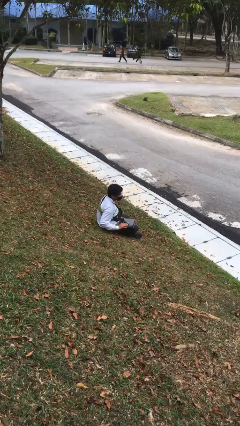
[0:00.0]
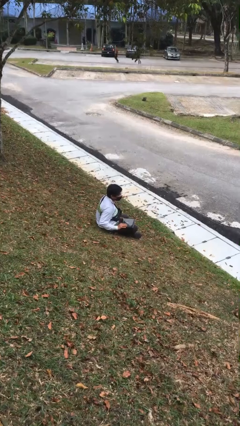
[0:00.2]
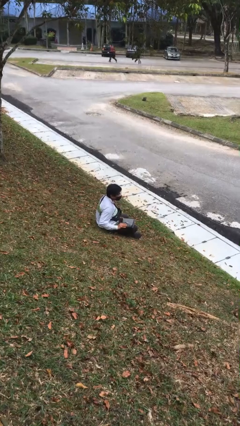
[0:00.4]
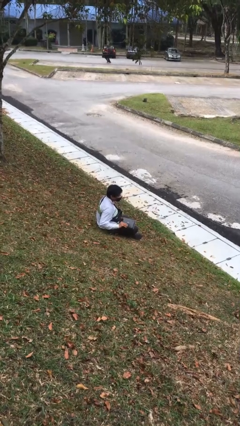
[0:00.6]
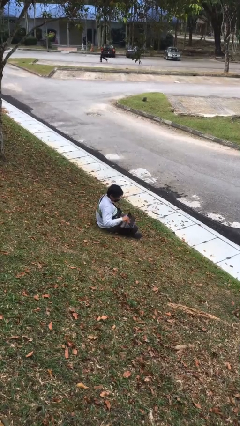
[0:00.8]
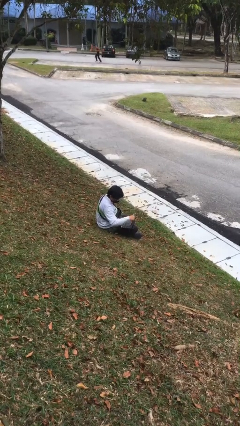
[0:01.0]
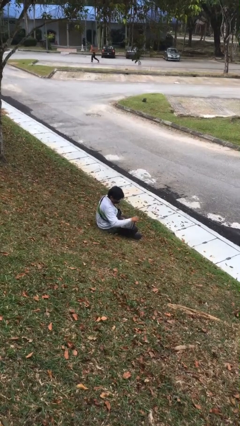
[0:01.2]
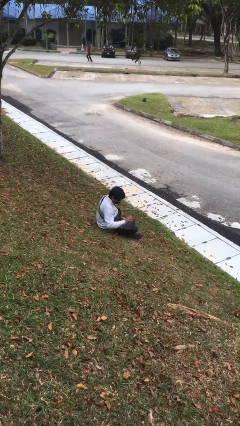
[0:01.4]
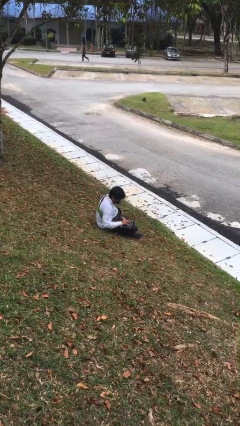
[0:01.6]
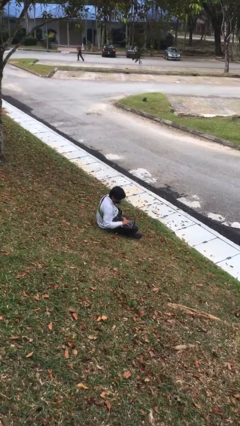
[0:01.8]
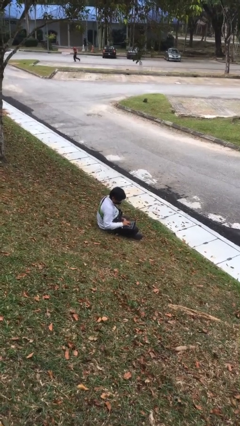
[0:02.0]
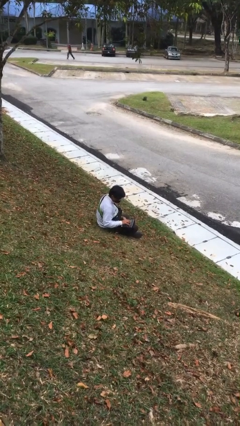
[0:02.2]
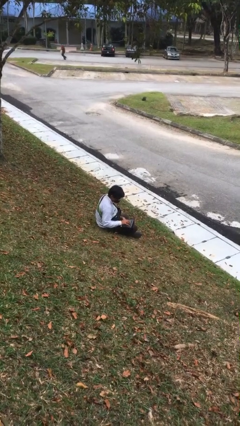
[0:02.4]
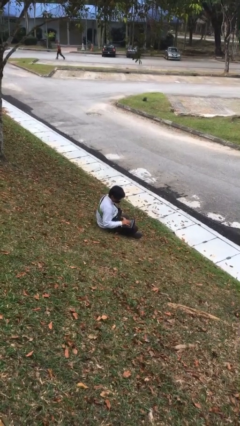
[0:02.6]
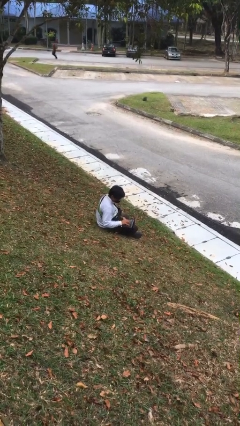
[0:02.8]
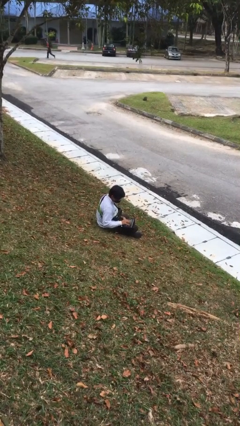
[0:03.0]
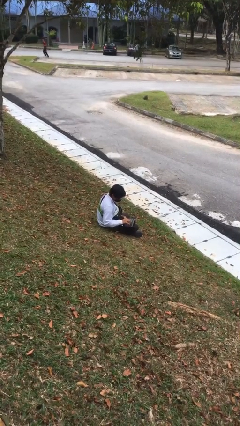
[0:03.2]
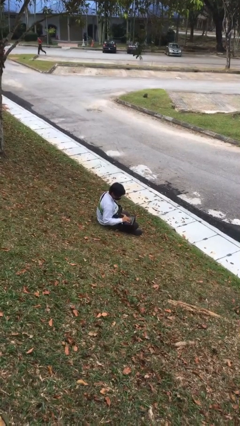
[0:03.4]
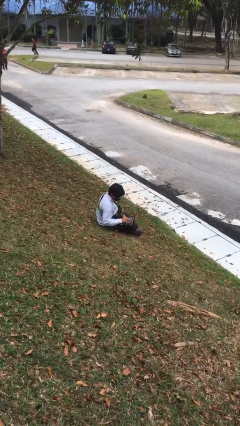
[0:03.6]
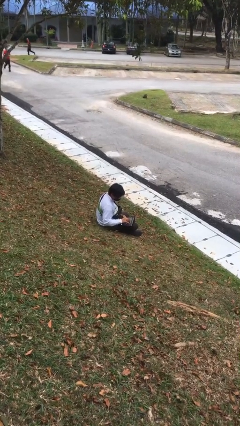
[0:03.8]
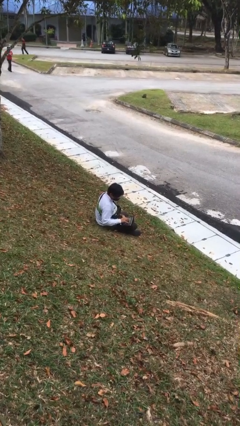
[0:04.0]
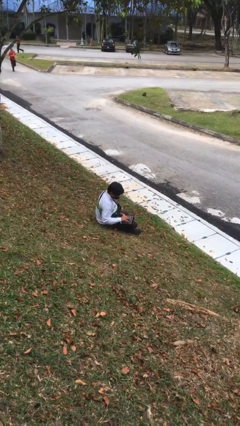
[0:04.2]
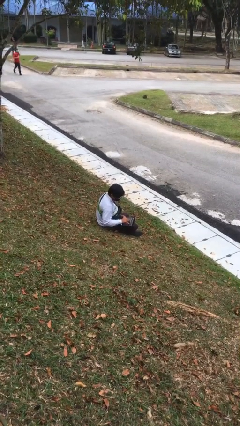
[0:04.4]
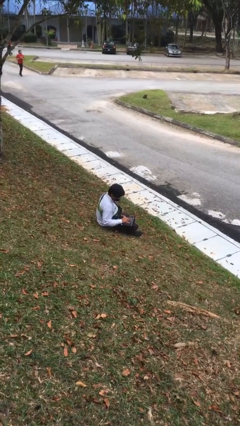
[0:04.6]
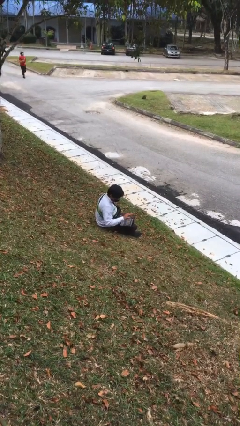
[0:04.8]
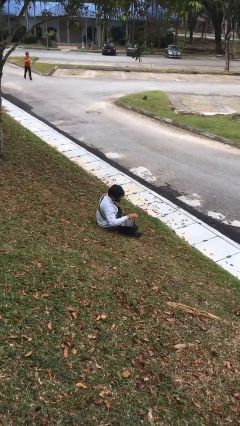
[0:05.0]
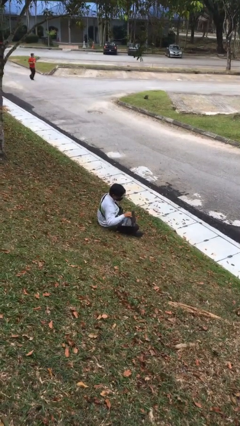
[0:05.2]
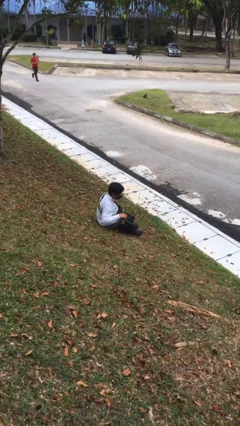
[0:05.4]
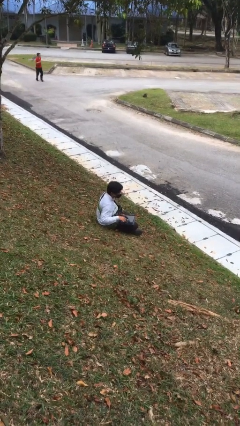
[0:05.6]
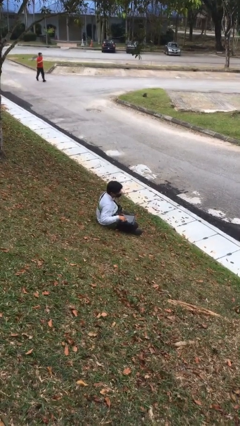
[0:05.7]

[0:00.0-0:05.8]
person interacts with laptop

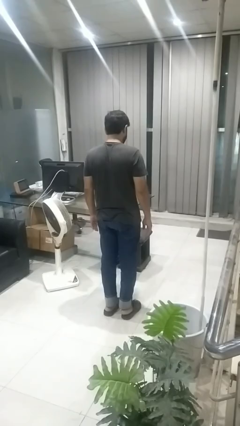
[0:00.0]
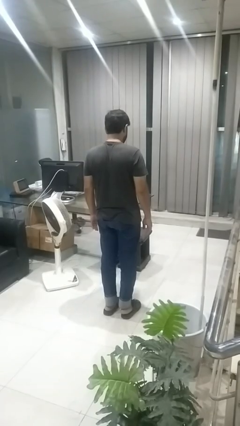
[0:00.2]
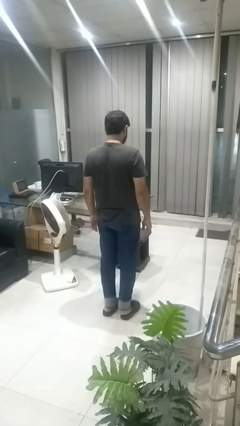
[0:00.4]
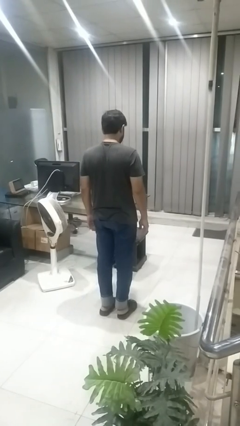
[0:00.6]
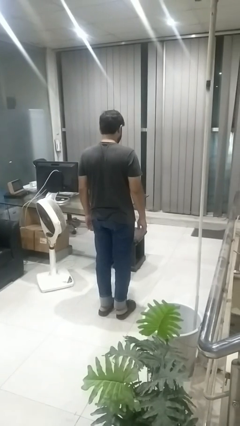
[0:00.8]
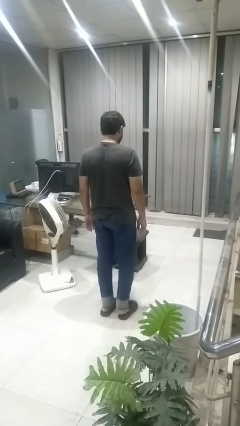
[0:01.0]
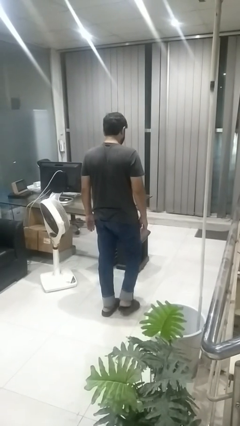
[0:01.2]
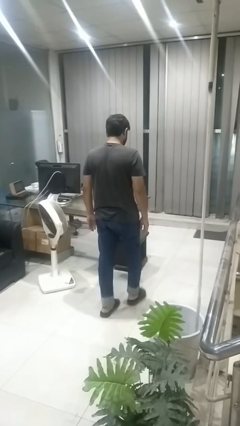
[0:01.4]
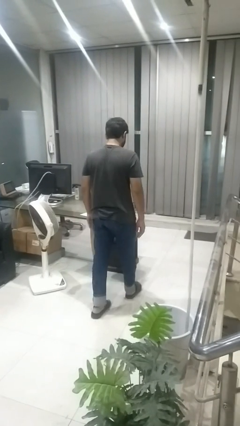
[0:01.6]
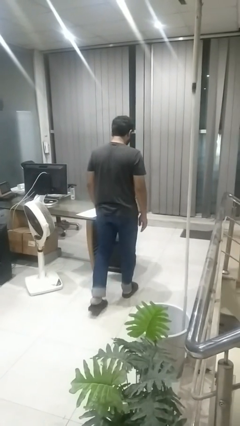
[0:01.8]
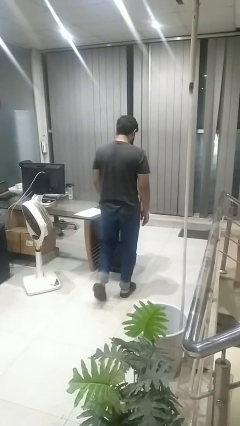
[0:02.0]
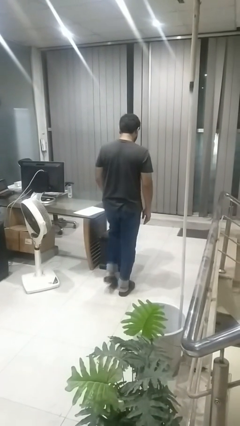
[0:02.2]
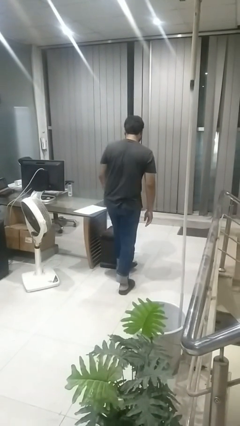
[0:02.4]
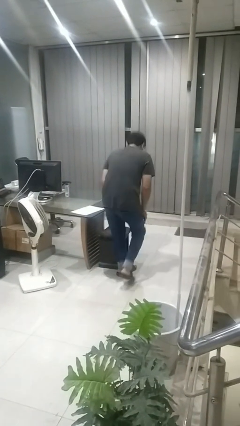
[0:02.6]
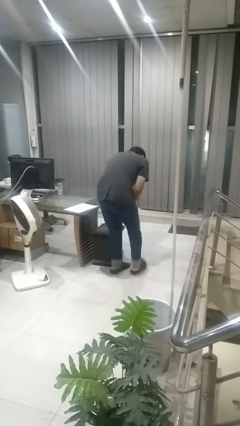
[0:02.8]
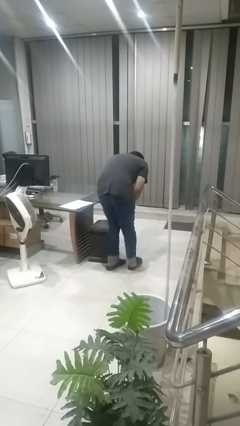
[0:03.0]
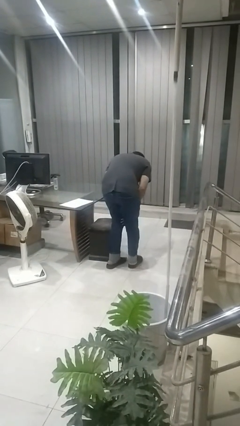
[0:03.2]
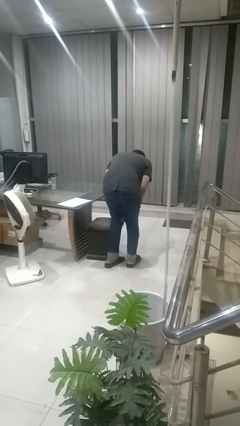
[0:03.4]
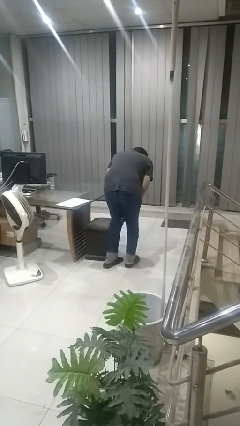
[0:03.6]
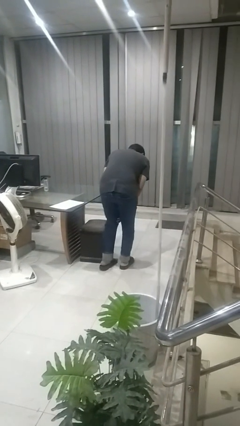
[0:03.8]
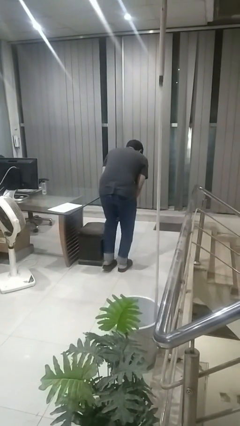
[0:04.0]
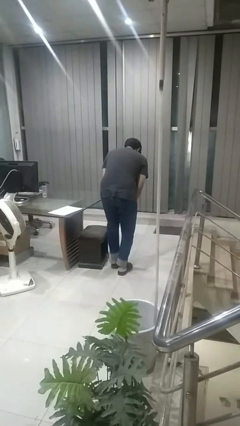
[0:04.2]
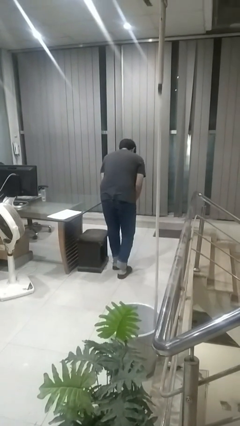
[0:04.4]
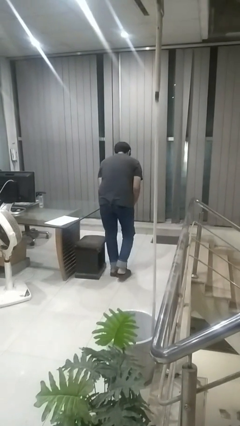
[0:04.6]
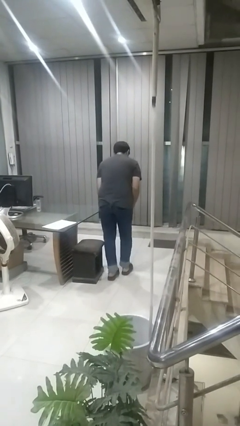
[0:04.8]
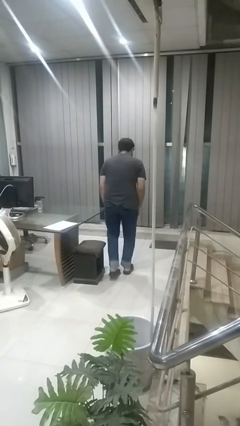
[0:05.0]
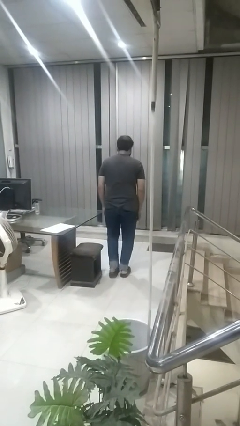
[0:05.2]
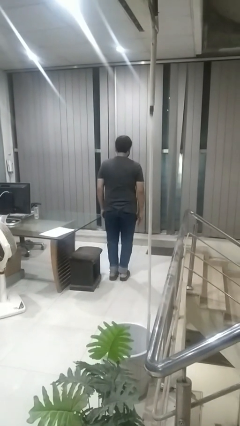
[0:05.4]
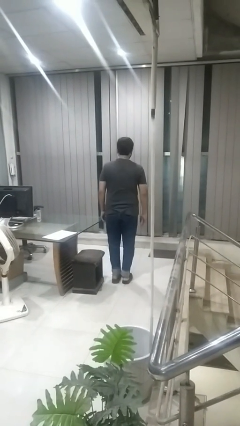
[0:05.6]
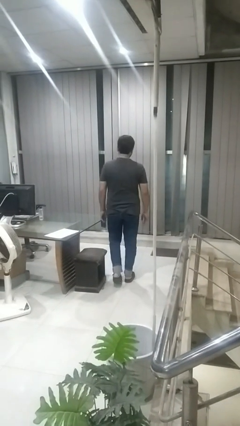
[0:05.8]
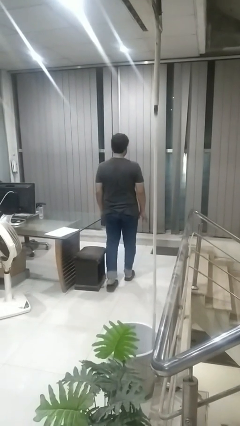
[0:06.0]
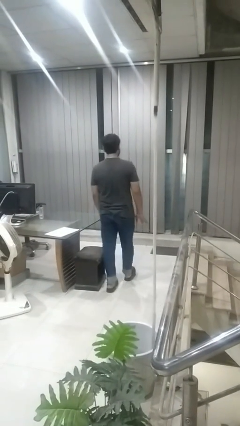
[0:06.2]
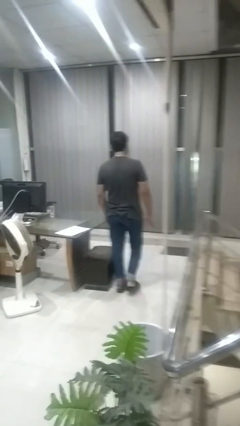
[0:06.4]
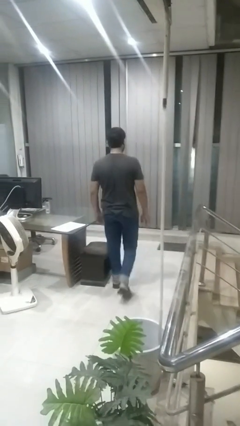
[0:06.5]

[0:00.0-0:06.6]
person bumps into table

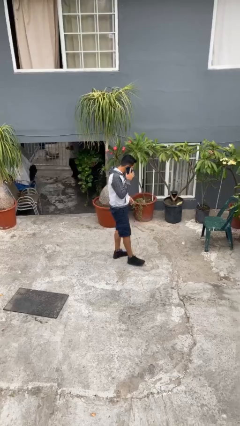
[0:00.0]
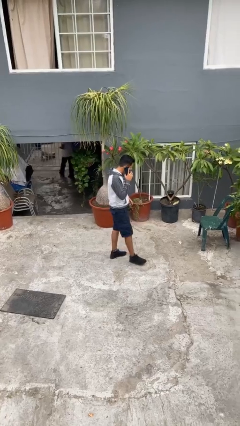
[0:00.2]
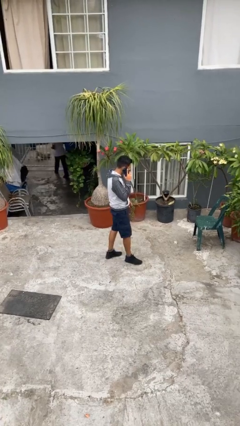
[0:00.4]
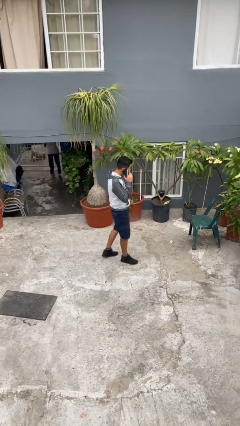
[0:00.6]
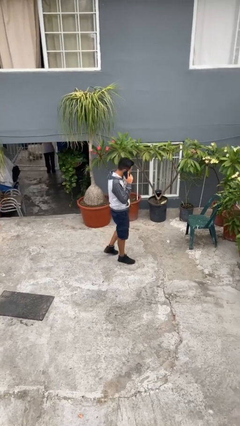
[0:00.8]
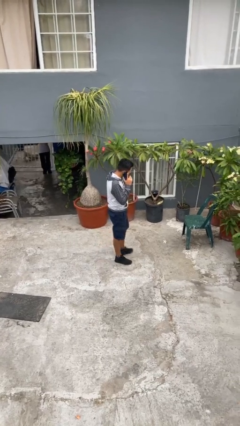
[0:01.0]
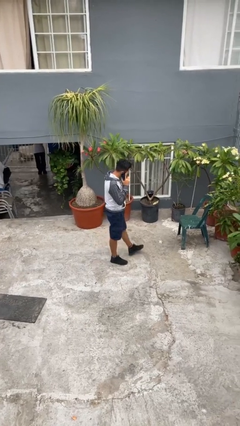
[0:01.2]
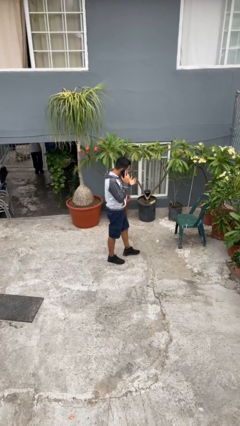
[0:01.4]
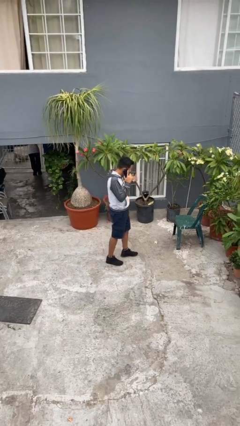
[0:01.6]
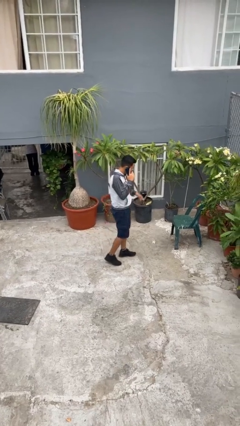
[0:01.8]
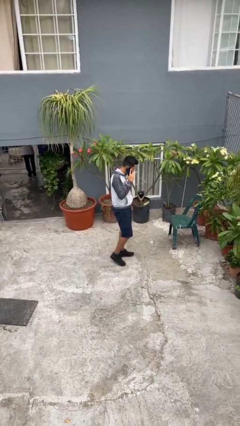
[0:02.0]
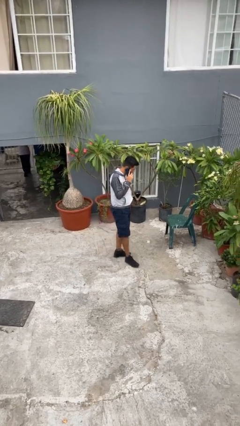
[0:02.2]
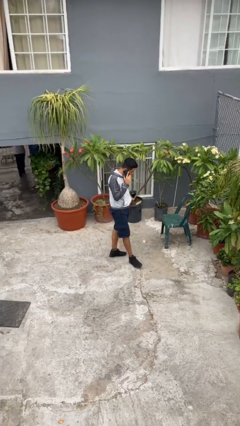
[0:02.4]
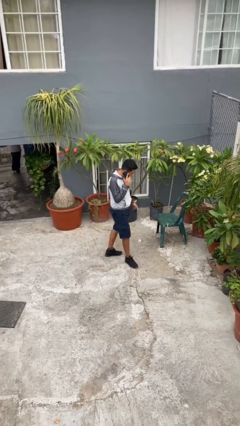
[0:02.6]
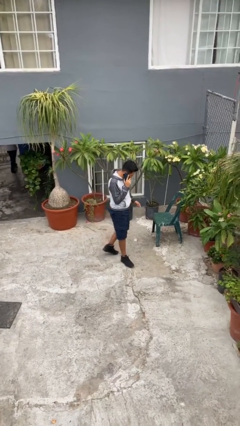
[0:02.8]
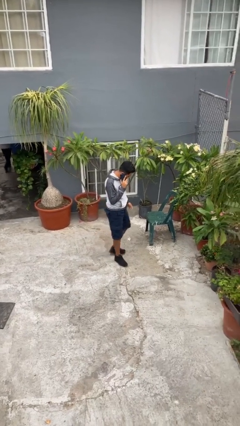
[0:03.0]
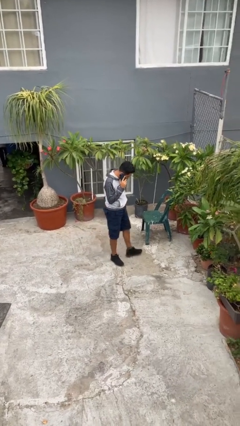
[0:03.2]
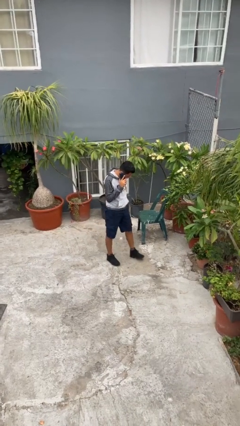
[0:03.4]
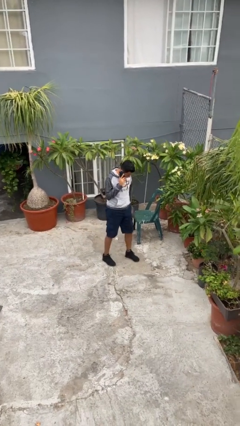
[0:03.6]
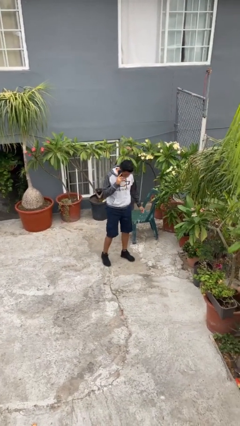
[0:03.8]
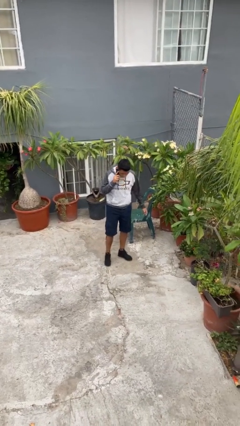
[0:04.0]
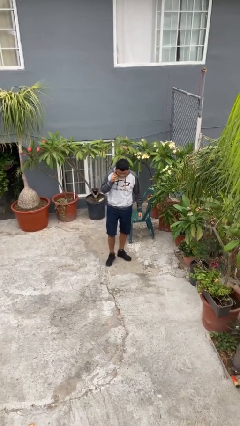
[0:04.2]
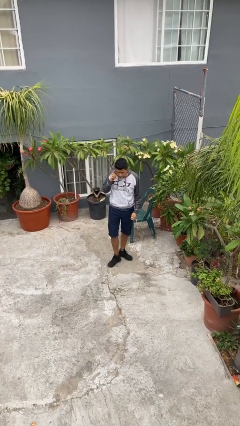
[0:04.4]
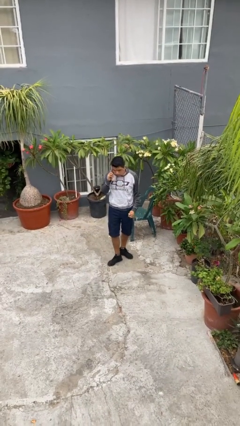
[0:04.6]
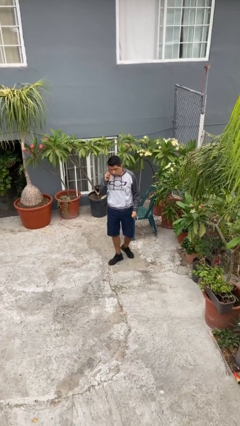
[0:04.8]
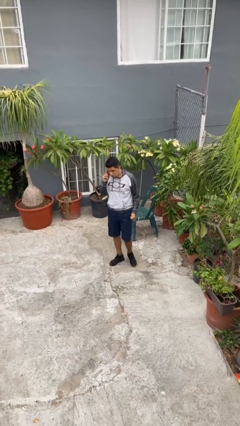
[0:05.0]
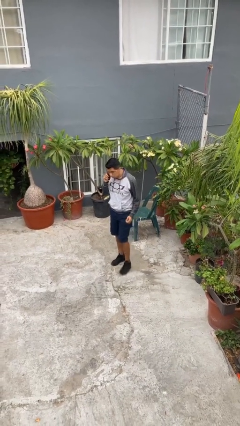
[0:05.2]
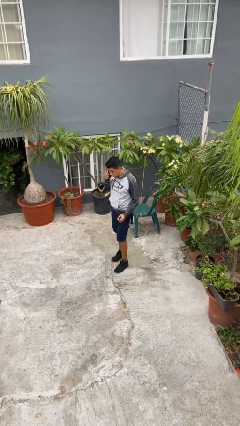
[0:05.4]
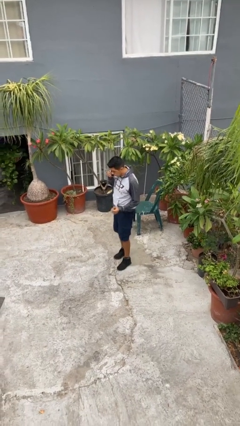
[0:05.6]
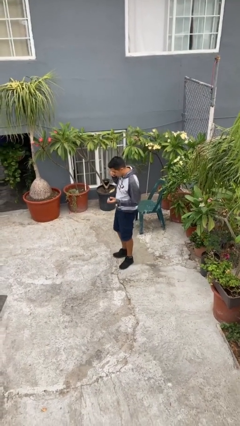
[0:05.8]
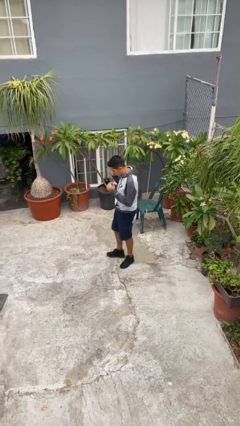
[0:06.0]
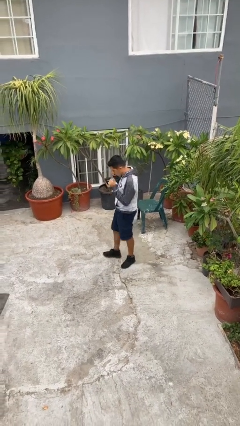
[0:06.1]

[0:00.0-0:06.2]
person talks on phone
